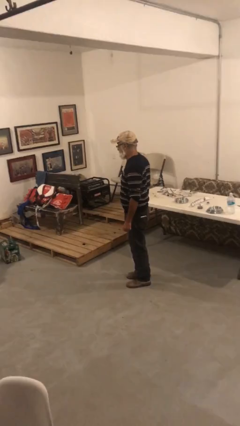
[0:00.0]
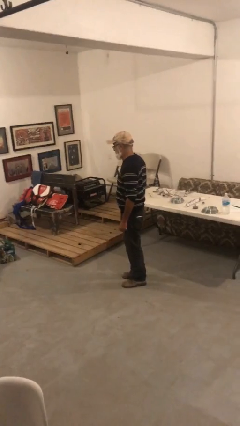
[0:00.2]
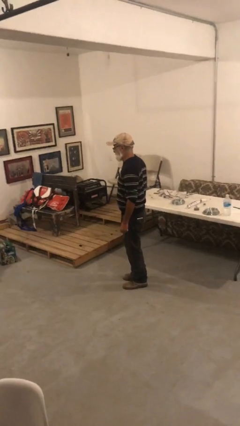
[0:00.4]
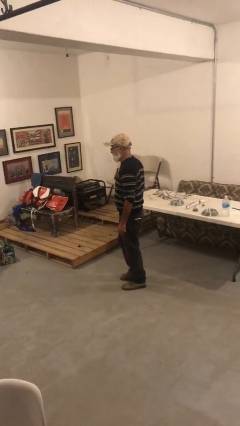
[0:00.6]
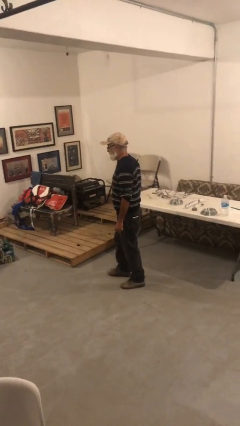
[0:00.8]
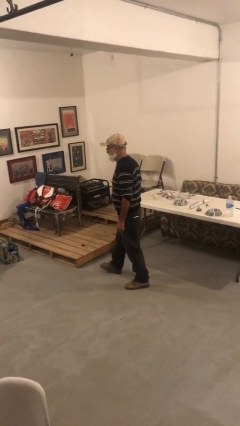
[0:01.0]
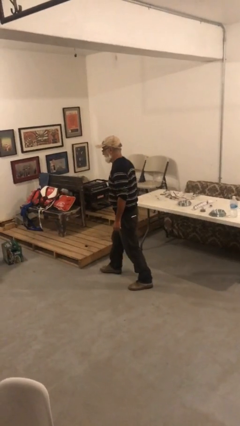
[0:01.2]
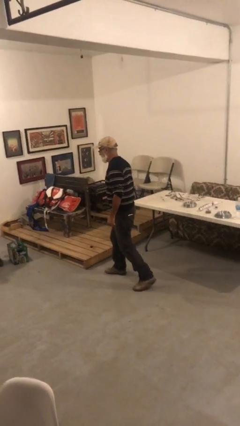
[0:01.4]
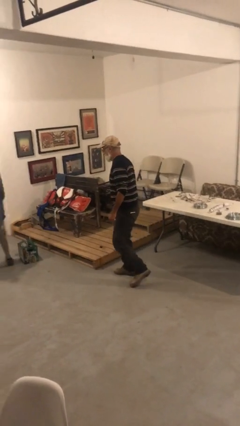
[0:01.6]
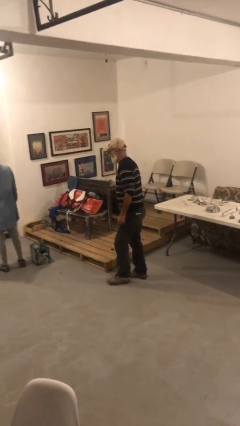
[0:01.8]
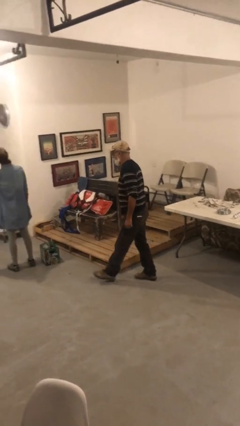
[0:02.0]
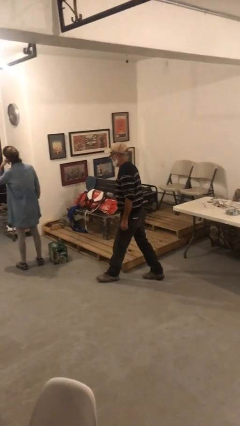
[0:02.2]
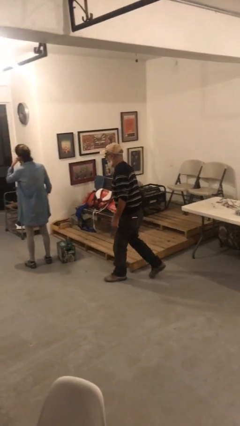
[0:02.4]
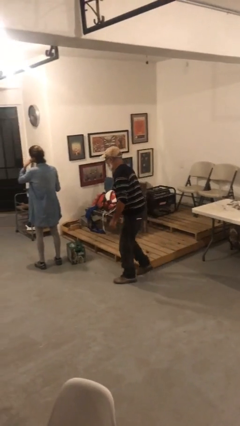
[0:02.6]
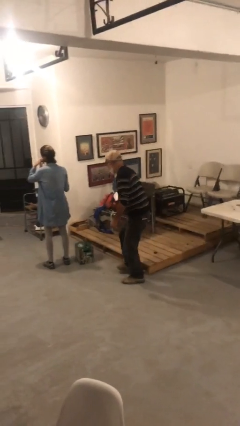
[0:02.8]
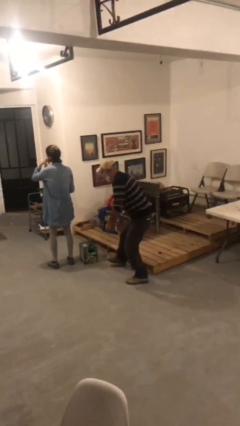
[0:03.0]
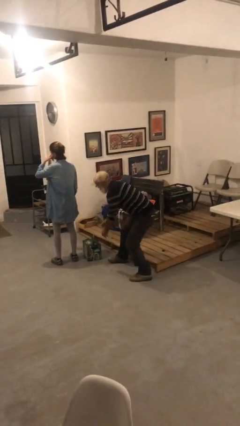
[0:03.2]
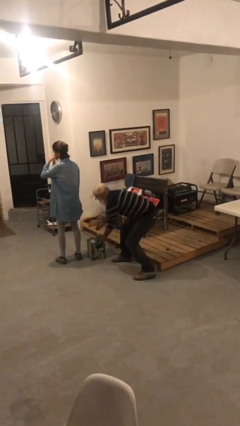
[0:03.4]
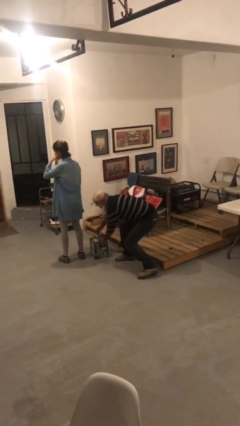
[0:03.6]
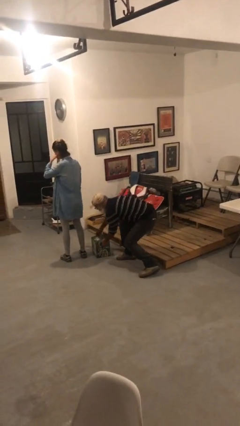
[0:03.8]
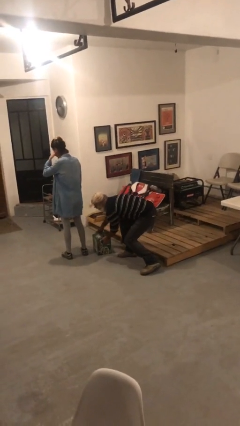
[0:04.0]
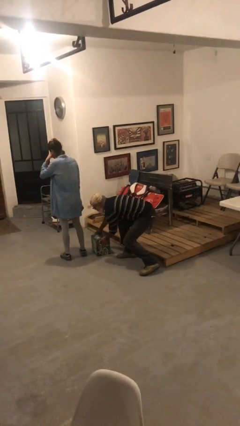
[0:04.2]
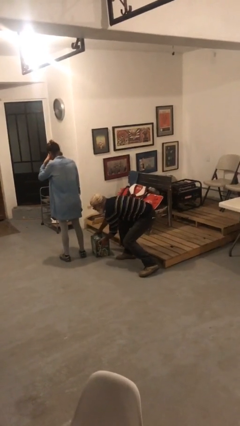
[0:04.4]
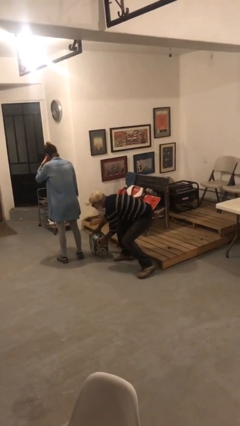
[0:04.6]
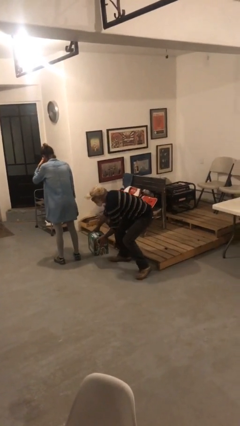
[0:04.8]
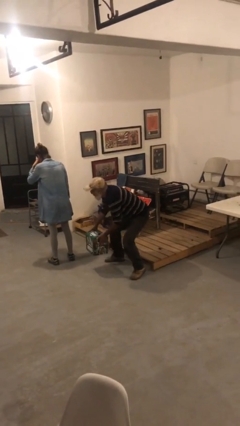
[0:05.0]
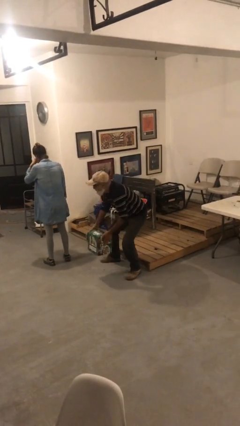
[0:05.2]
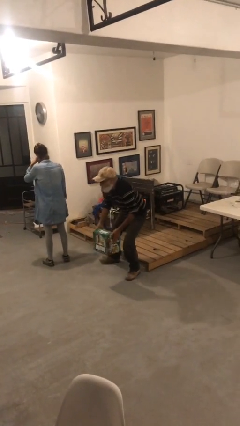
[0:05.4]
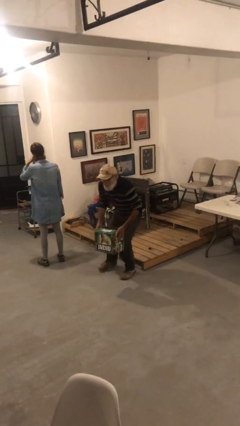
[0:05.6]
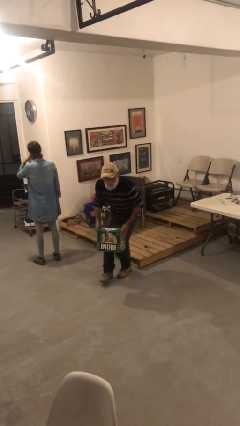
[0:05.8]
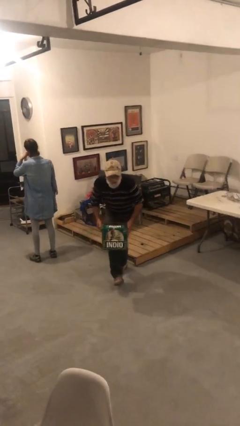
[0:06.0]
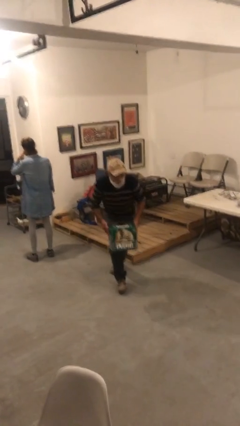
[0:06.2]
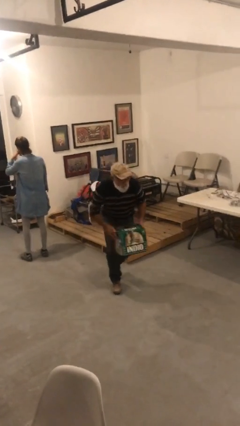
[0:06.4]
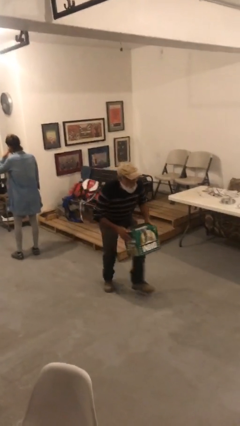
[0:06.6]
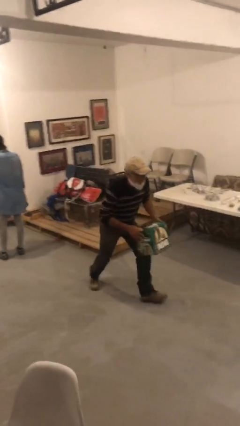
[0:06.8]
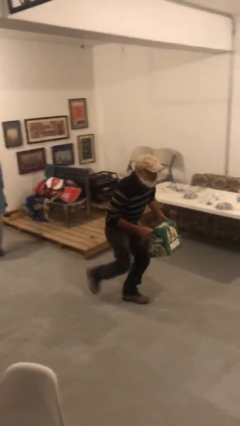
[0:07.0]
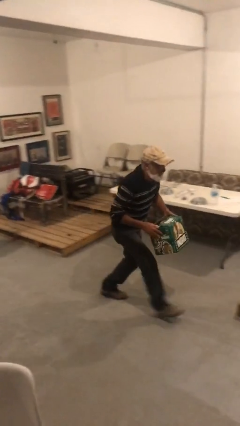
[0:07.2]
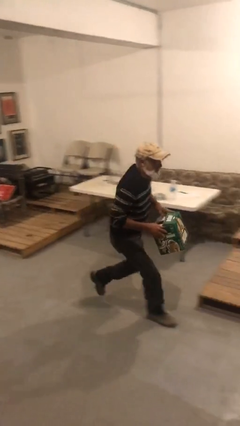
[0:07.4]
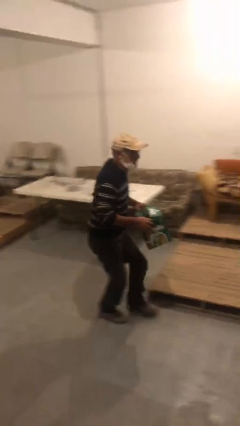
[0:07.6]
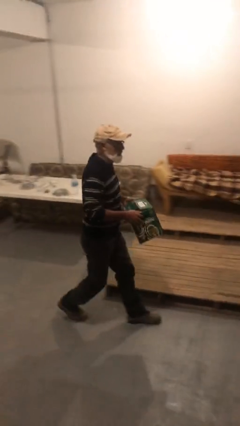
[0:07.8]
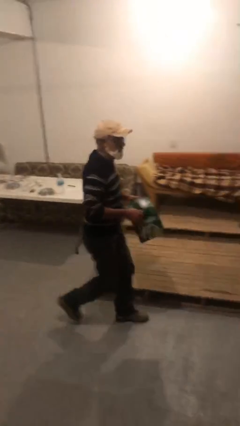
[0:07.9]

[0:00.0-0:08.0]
person steals object from person

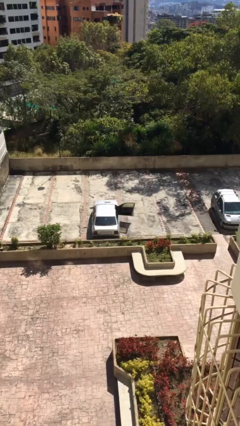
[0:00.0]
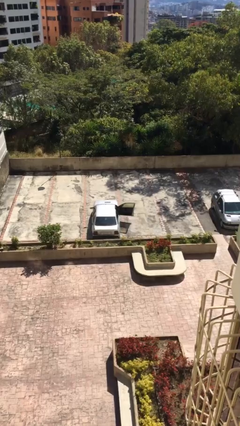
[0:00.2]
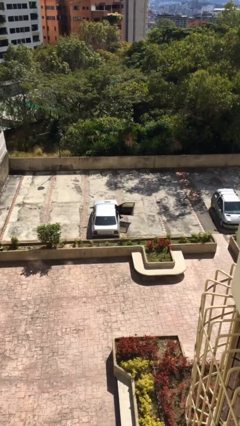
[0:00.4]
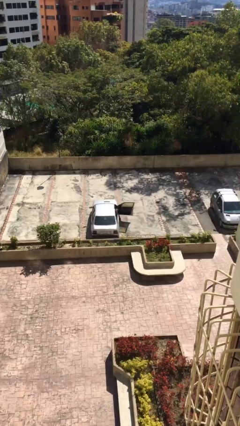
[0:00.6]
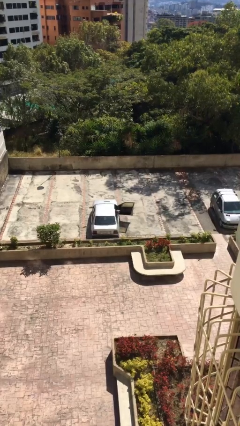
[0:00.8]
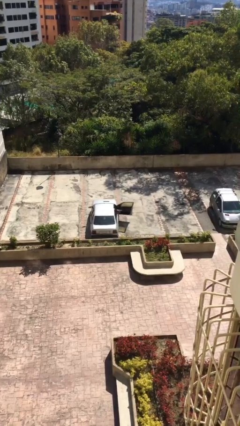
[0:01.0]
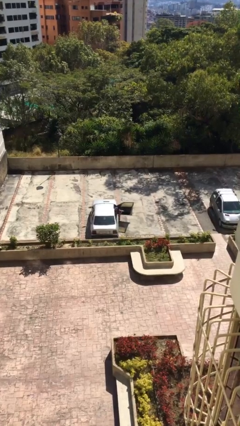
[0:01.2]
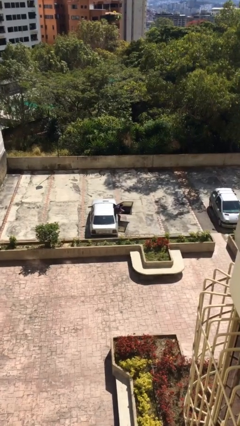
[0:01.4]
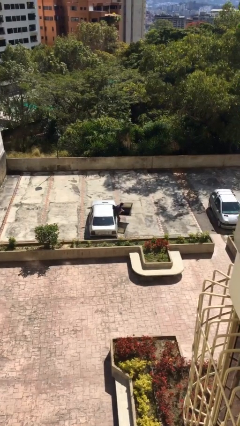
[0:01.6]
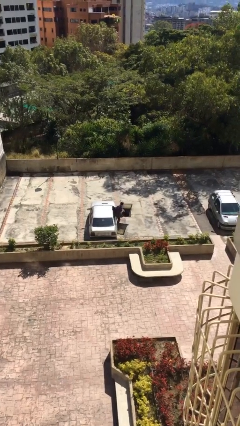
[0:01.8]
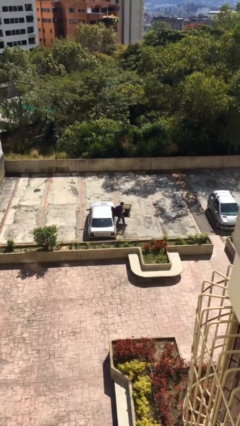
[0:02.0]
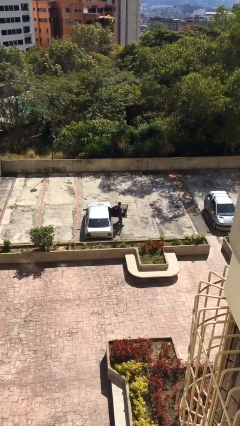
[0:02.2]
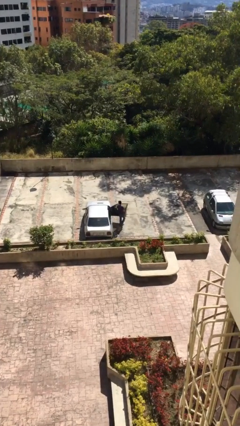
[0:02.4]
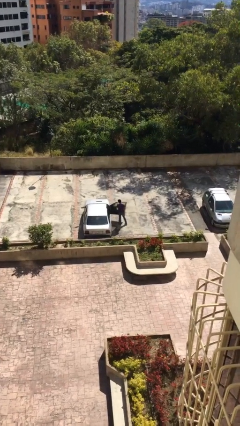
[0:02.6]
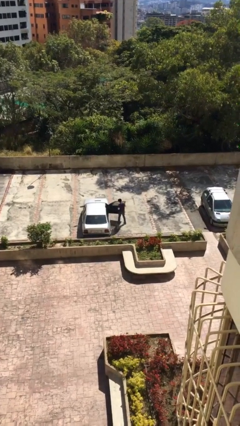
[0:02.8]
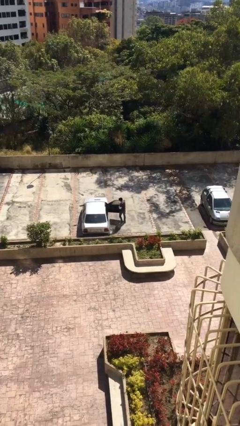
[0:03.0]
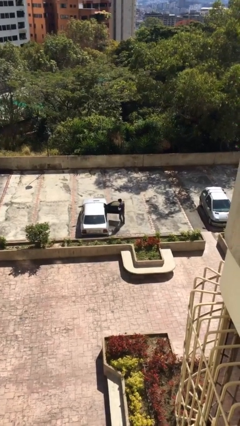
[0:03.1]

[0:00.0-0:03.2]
person exits car

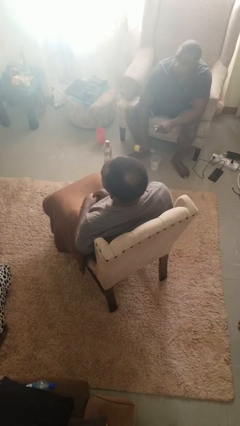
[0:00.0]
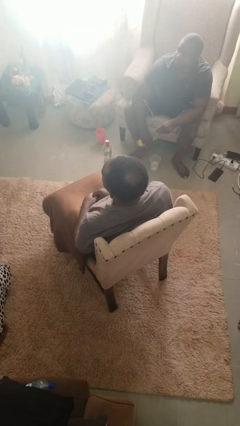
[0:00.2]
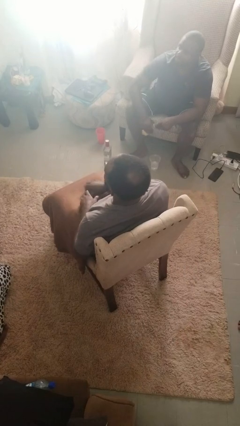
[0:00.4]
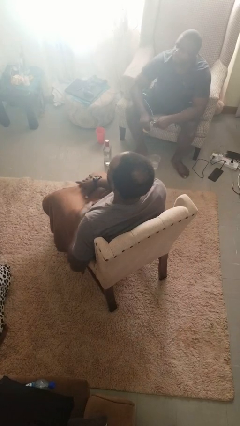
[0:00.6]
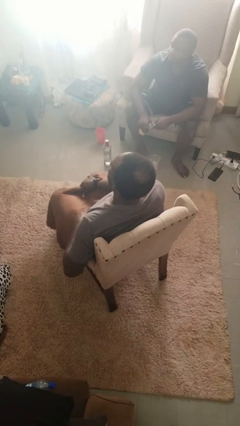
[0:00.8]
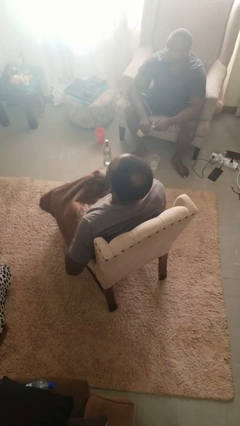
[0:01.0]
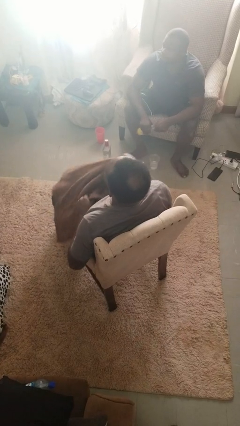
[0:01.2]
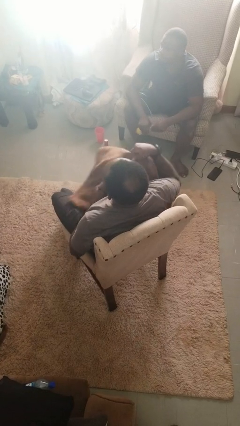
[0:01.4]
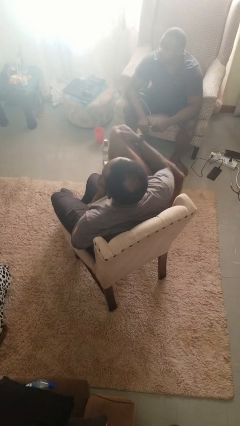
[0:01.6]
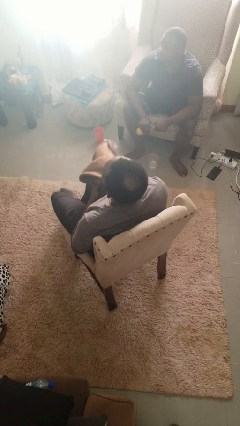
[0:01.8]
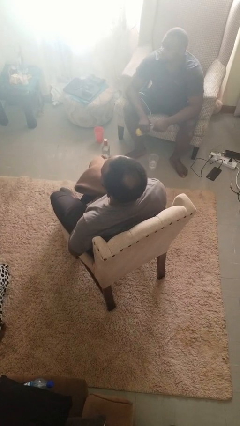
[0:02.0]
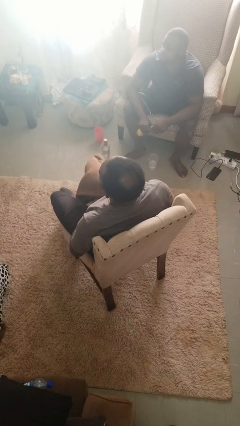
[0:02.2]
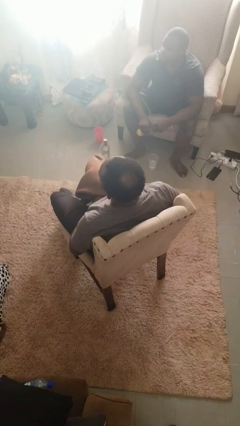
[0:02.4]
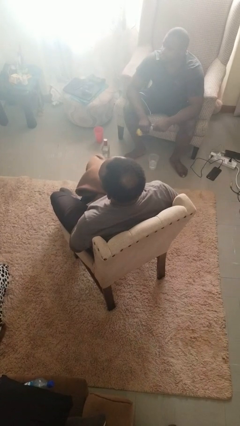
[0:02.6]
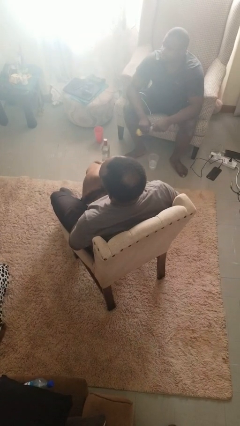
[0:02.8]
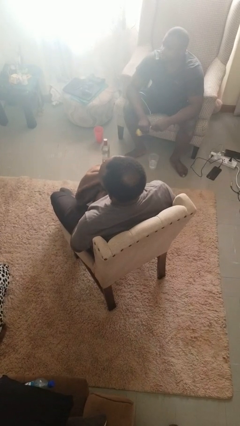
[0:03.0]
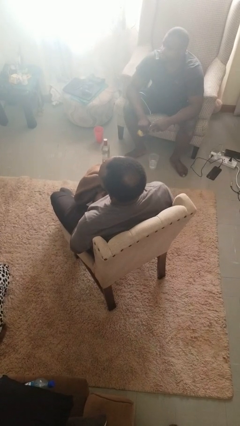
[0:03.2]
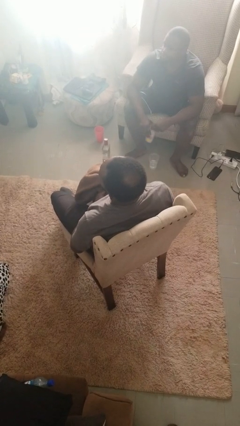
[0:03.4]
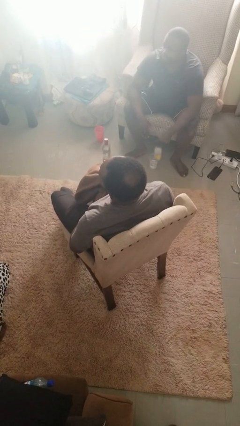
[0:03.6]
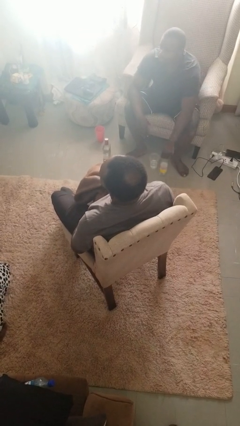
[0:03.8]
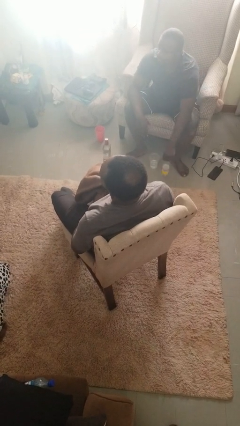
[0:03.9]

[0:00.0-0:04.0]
person uncovers with blanket

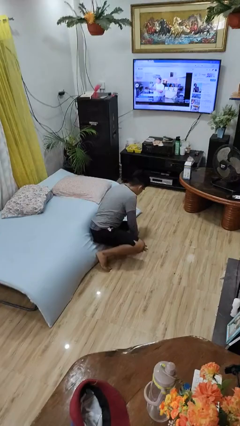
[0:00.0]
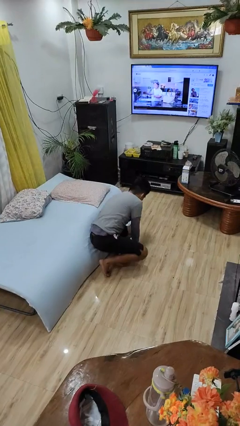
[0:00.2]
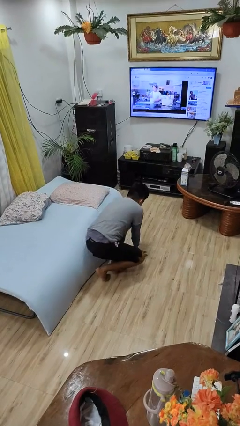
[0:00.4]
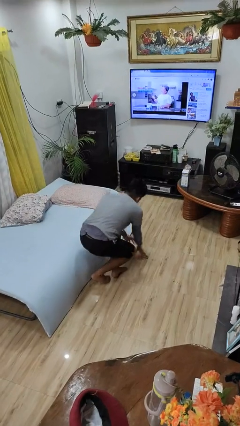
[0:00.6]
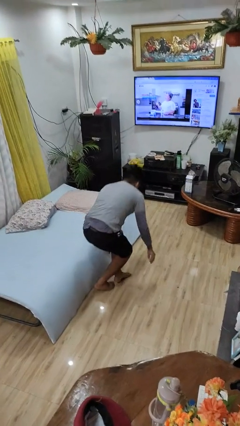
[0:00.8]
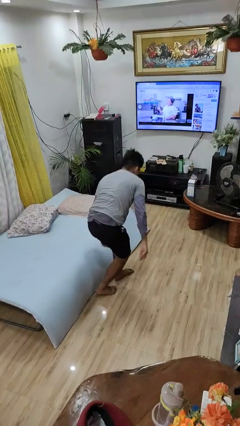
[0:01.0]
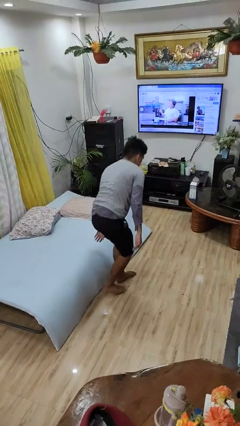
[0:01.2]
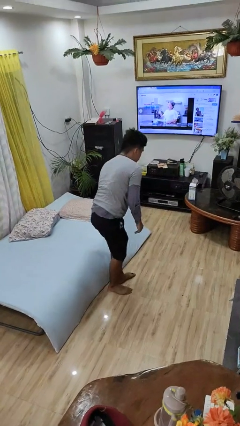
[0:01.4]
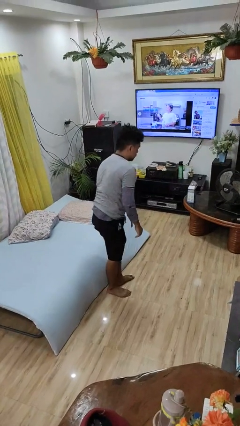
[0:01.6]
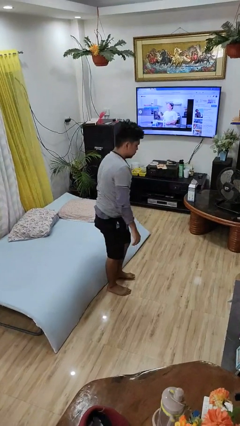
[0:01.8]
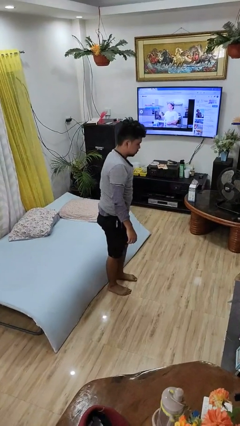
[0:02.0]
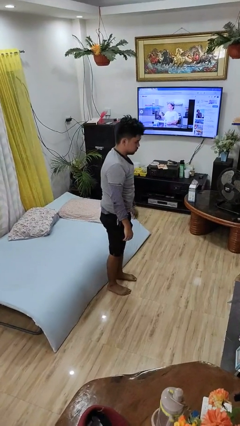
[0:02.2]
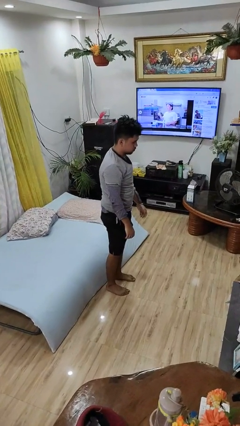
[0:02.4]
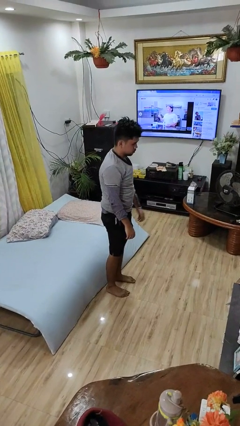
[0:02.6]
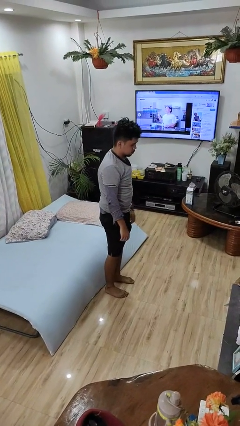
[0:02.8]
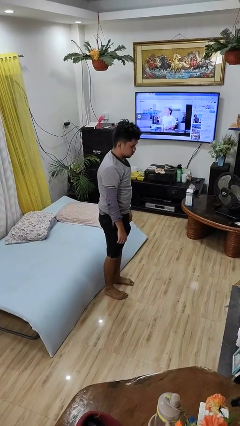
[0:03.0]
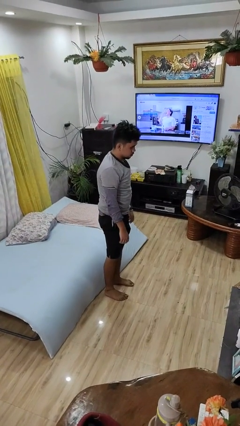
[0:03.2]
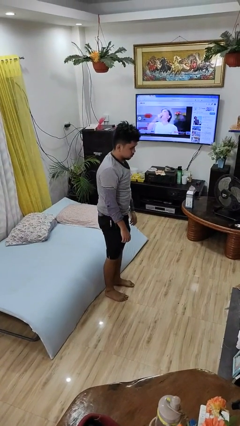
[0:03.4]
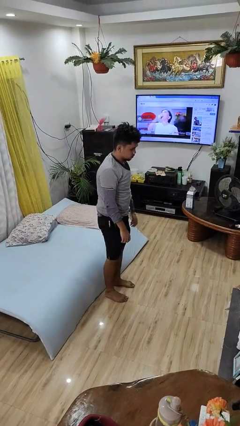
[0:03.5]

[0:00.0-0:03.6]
person stands up from floor
